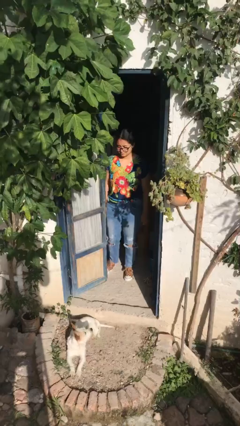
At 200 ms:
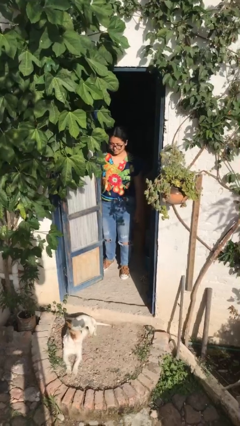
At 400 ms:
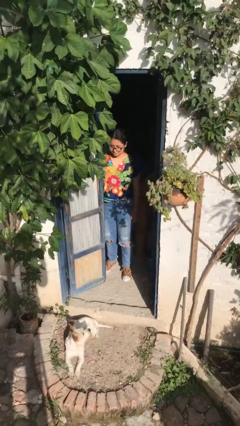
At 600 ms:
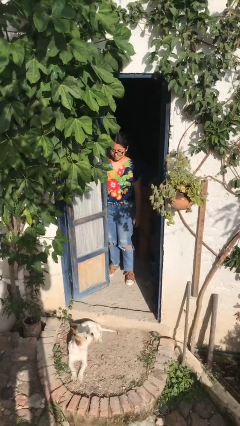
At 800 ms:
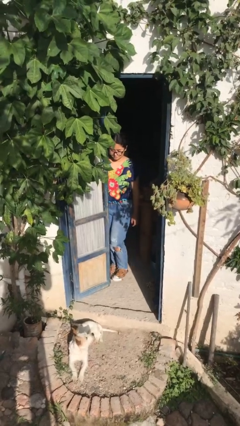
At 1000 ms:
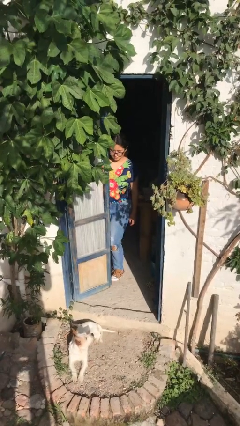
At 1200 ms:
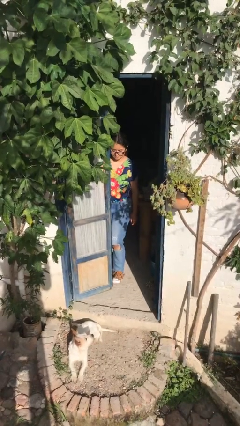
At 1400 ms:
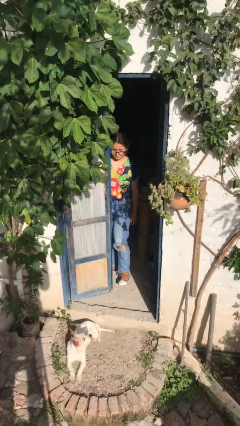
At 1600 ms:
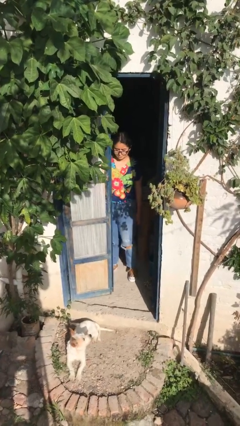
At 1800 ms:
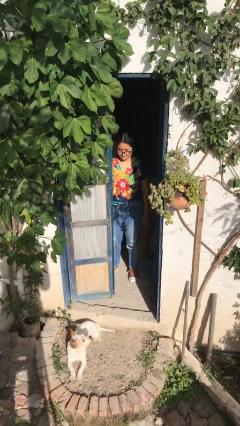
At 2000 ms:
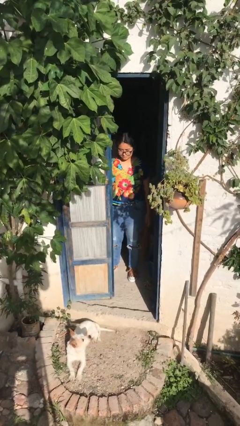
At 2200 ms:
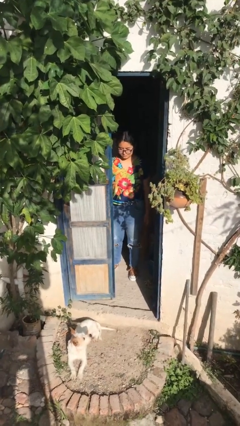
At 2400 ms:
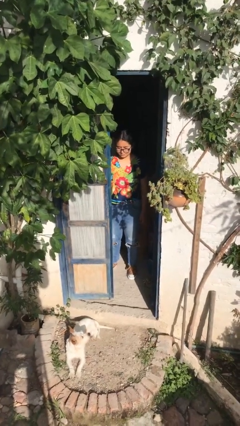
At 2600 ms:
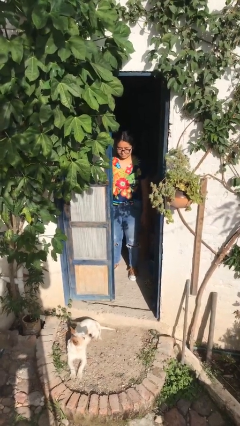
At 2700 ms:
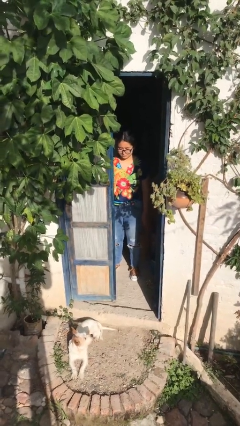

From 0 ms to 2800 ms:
person closes door with foot

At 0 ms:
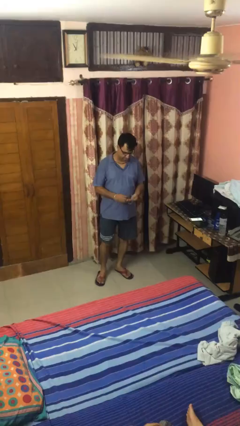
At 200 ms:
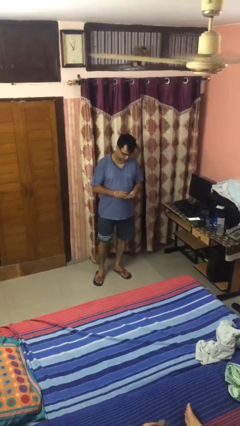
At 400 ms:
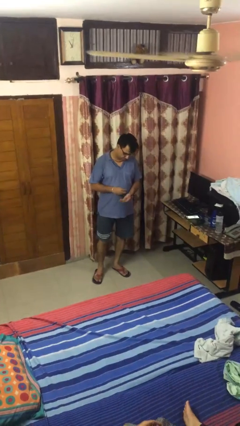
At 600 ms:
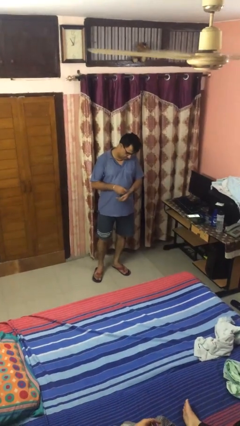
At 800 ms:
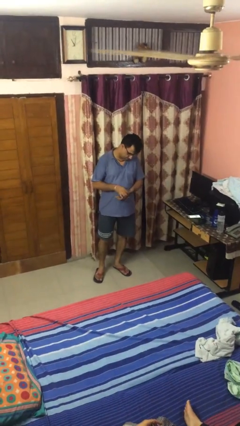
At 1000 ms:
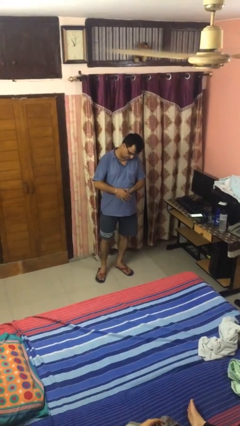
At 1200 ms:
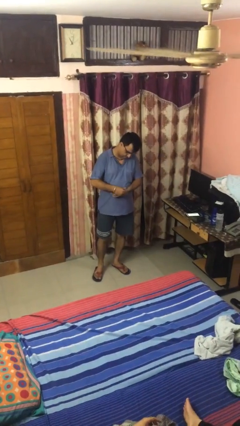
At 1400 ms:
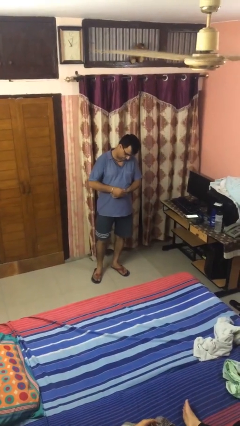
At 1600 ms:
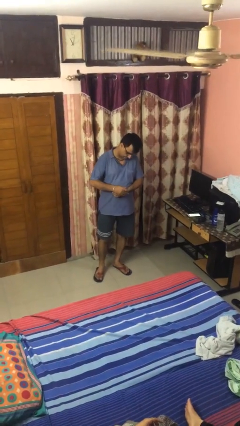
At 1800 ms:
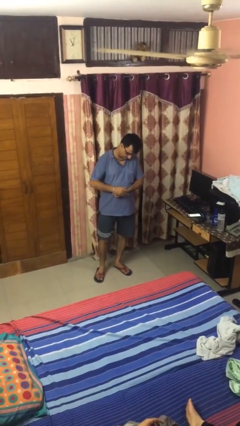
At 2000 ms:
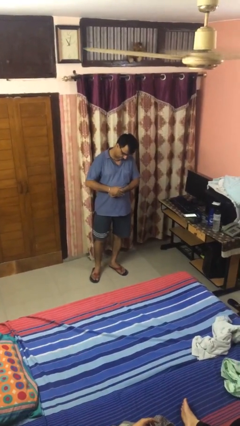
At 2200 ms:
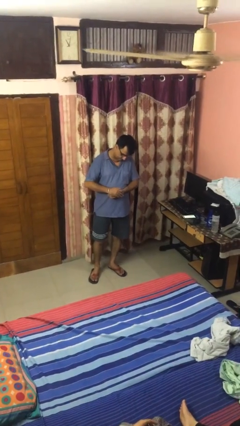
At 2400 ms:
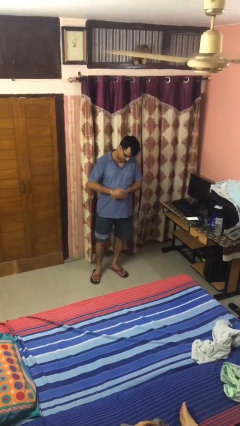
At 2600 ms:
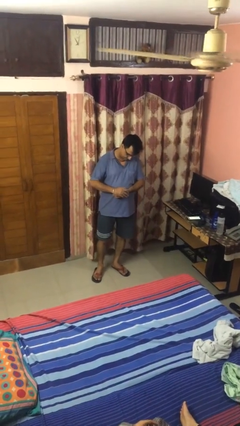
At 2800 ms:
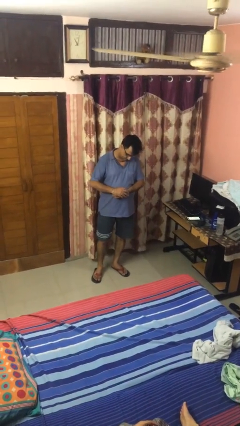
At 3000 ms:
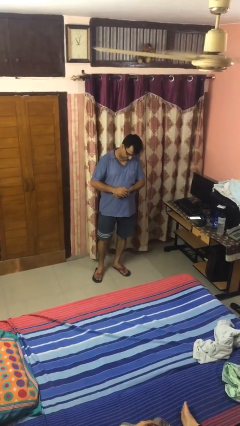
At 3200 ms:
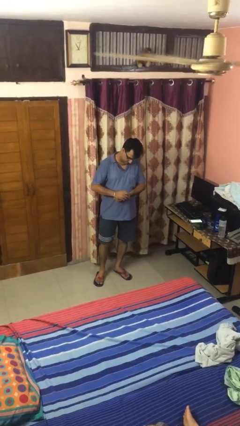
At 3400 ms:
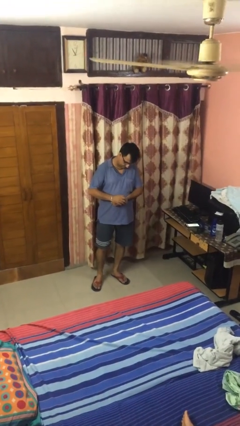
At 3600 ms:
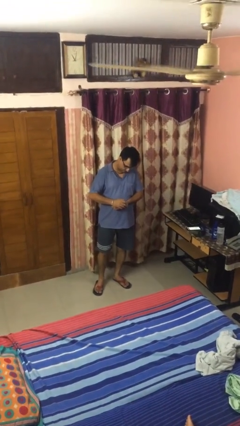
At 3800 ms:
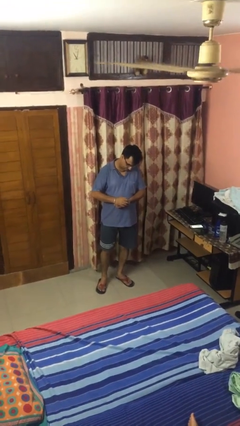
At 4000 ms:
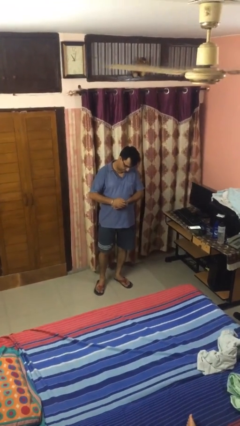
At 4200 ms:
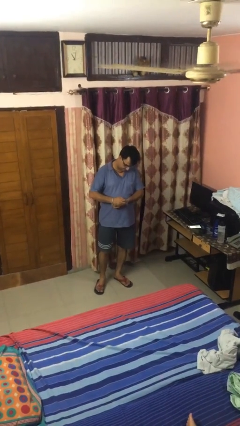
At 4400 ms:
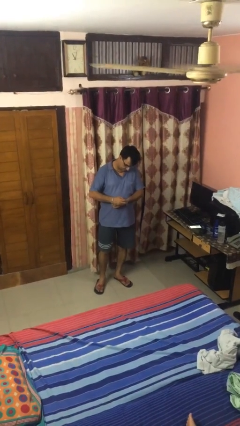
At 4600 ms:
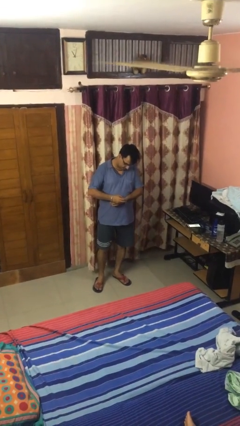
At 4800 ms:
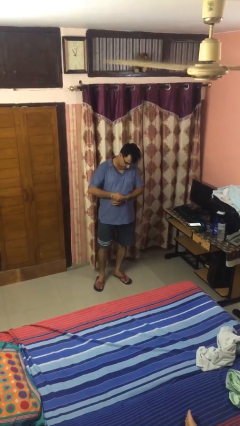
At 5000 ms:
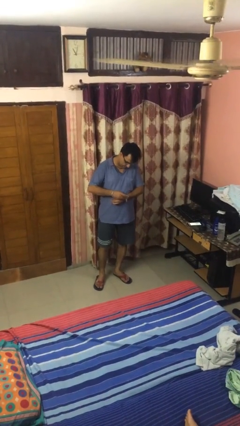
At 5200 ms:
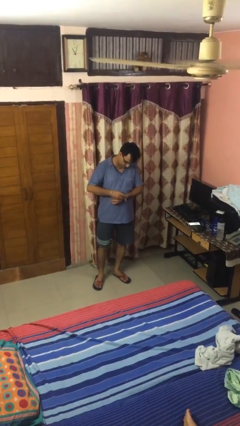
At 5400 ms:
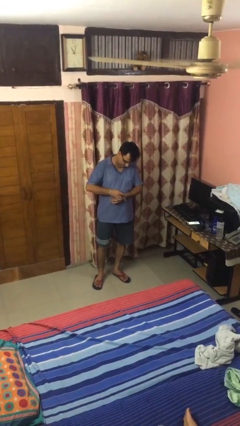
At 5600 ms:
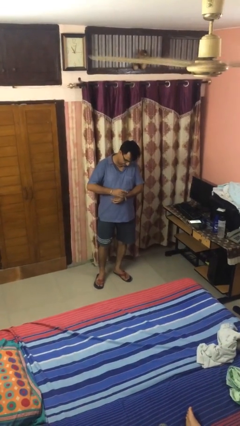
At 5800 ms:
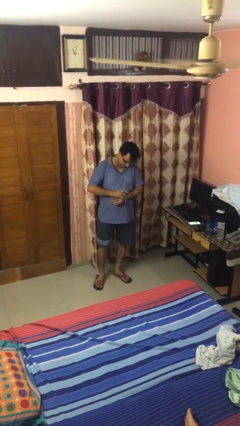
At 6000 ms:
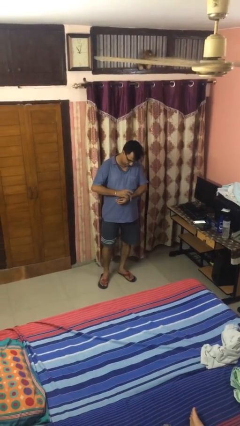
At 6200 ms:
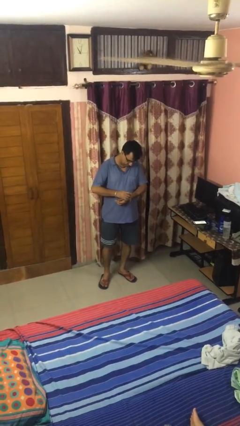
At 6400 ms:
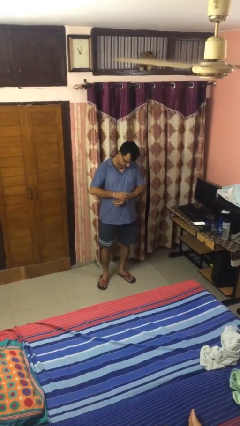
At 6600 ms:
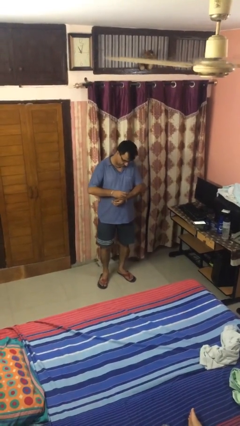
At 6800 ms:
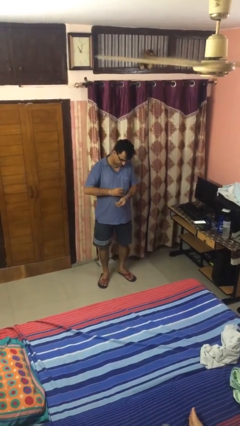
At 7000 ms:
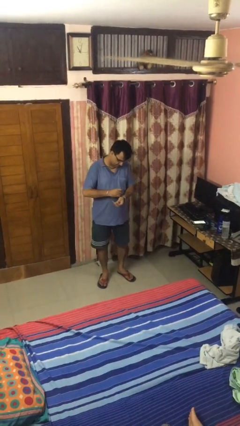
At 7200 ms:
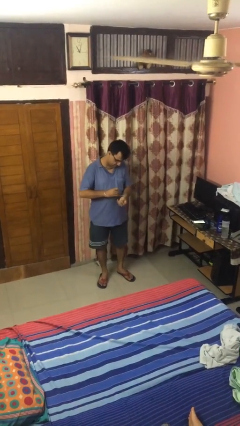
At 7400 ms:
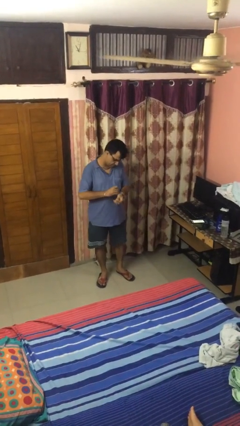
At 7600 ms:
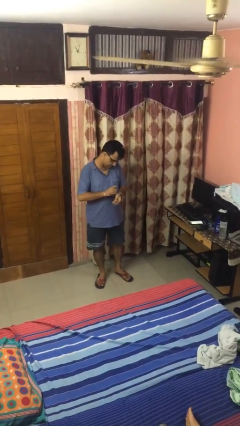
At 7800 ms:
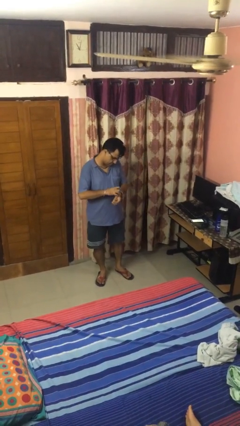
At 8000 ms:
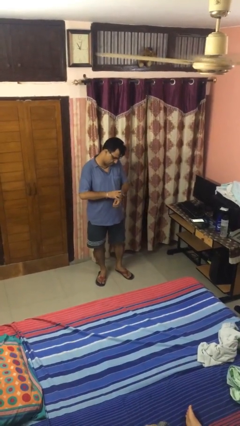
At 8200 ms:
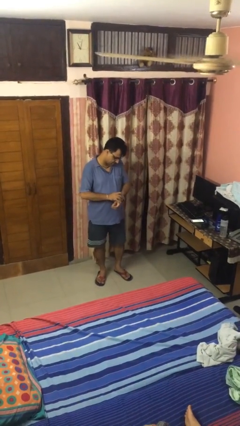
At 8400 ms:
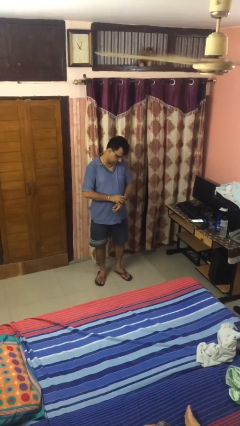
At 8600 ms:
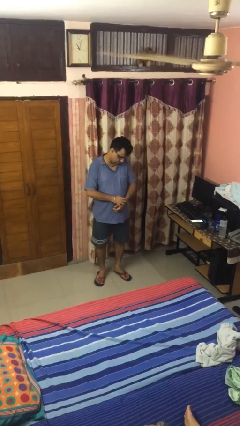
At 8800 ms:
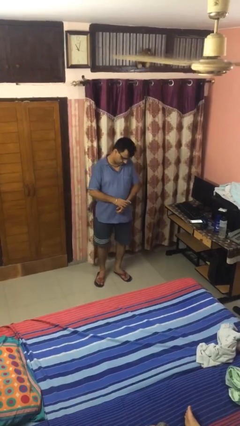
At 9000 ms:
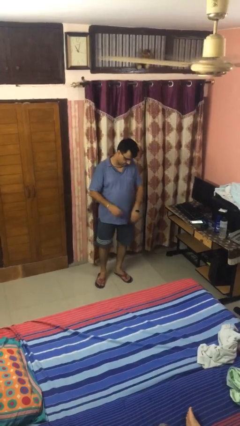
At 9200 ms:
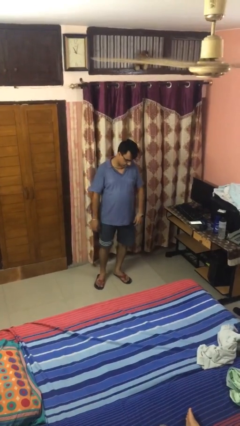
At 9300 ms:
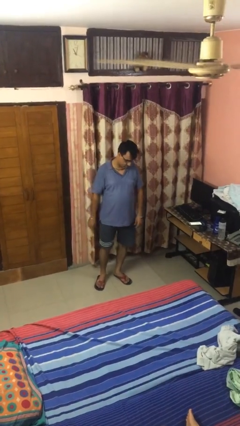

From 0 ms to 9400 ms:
person puts on wristwatch

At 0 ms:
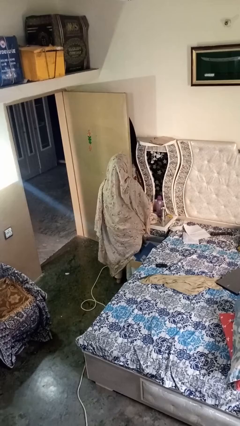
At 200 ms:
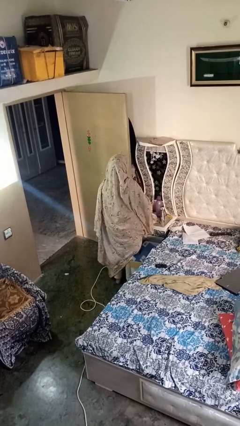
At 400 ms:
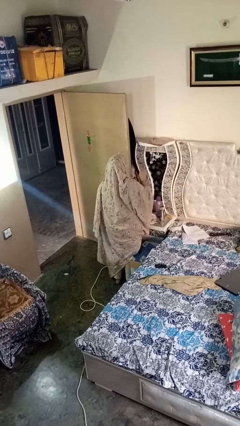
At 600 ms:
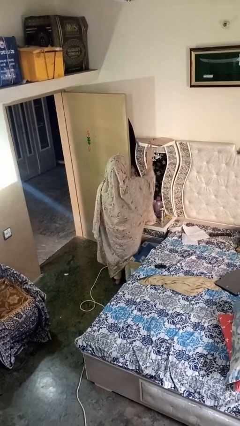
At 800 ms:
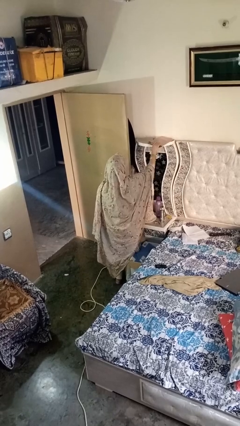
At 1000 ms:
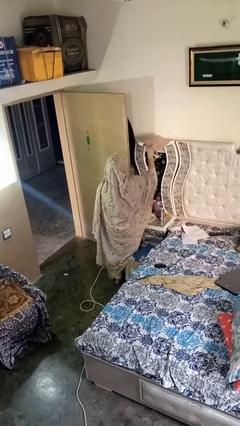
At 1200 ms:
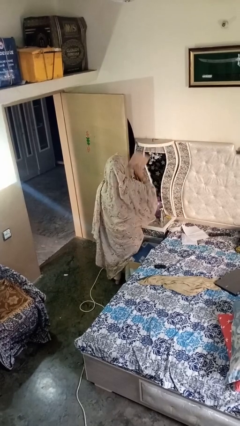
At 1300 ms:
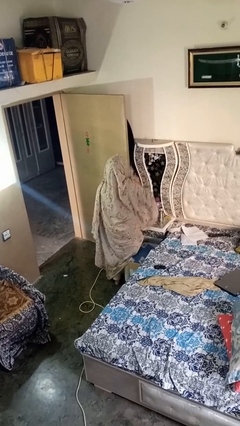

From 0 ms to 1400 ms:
person picks up object from shelf

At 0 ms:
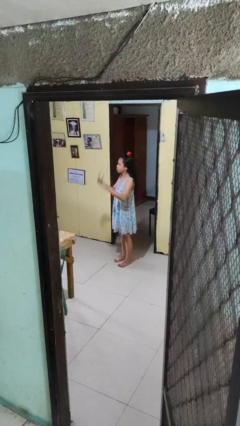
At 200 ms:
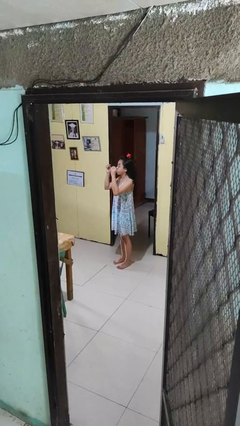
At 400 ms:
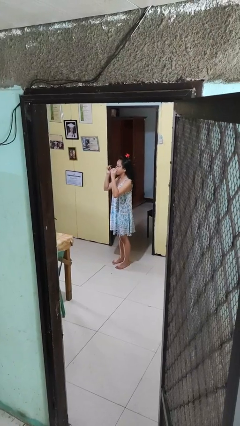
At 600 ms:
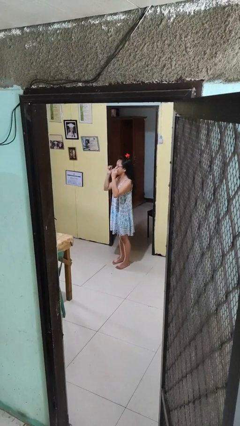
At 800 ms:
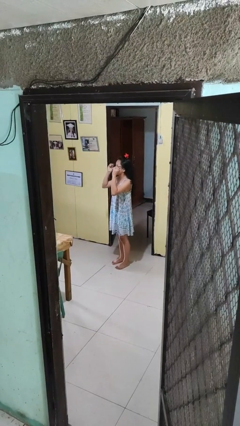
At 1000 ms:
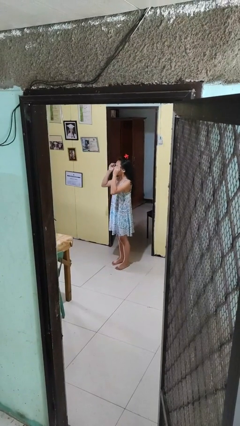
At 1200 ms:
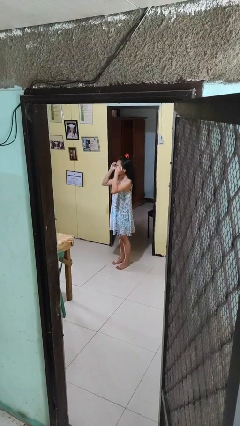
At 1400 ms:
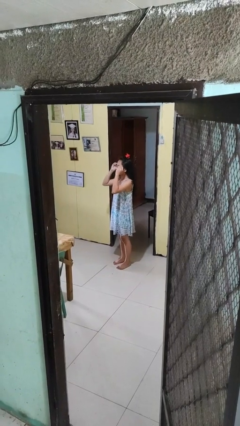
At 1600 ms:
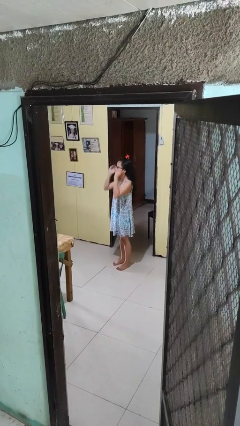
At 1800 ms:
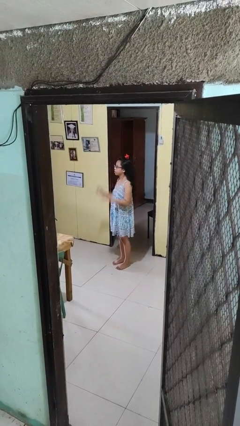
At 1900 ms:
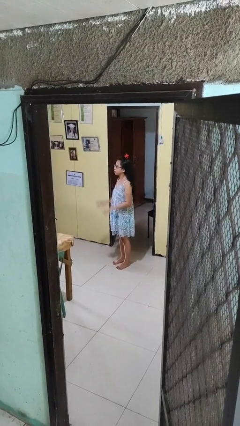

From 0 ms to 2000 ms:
person puts on glasses

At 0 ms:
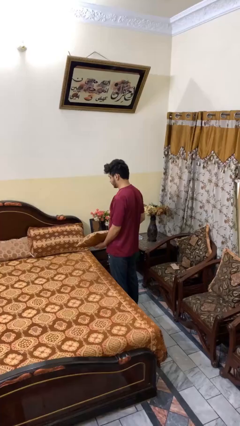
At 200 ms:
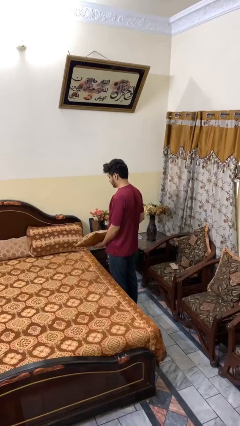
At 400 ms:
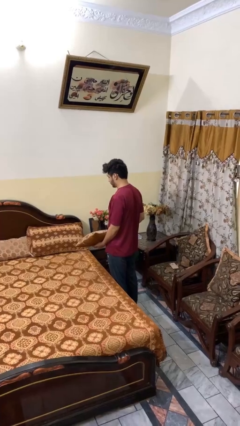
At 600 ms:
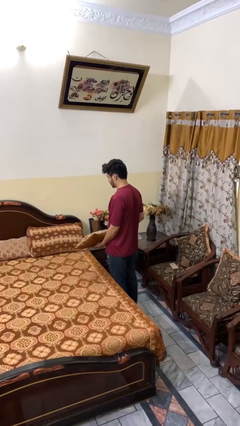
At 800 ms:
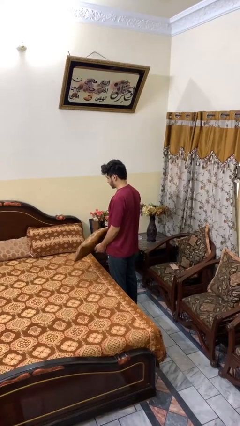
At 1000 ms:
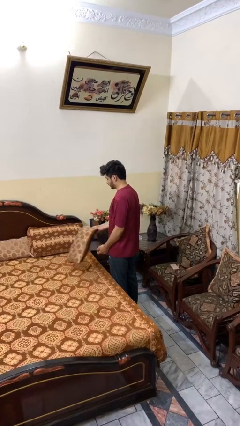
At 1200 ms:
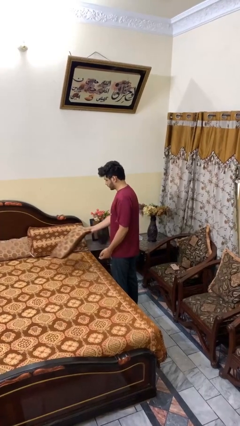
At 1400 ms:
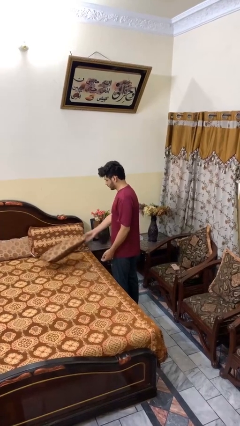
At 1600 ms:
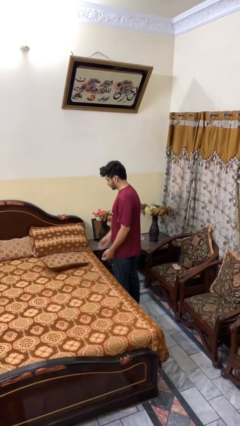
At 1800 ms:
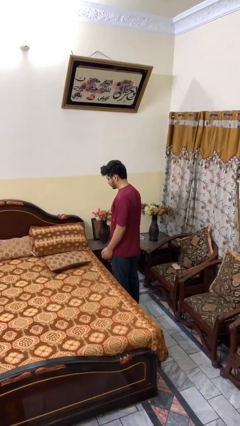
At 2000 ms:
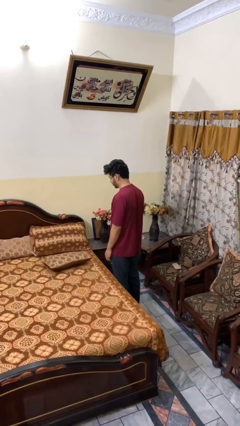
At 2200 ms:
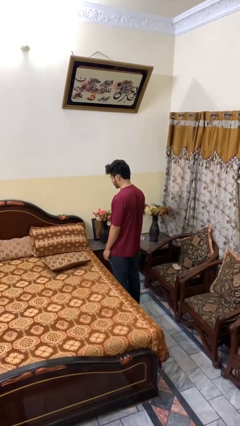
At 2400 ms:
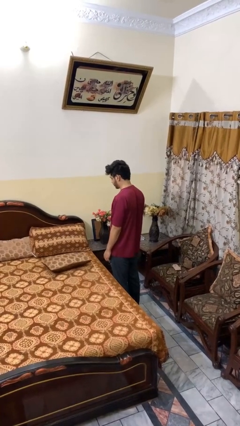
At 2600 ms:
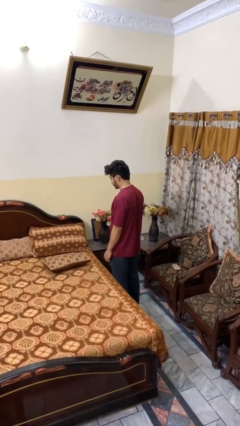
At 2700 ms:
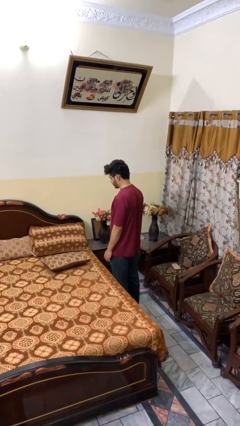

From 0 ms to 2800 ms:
person puts down object on bed
